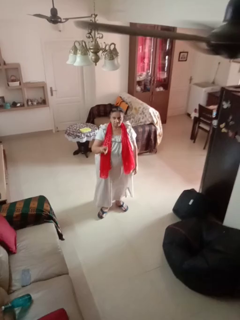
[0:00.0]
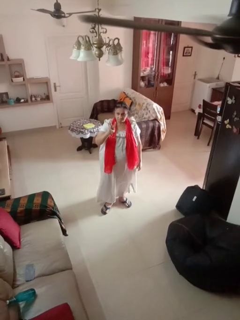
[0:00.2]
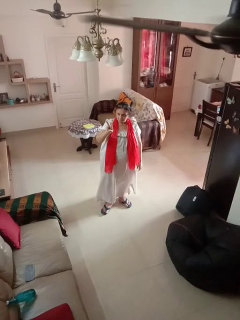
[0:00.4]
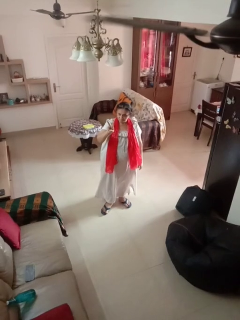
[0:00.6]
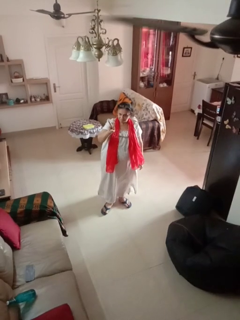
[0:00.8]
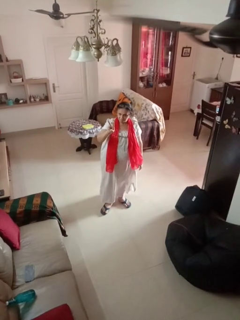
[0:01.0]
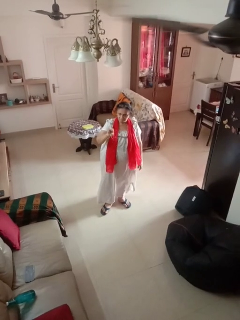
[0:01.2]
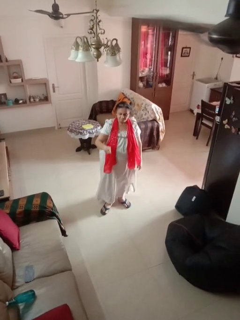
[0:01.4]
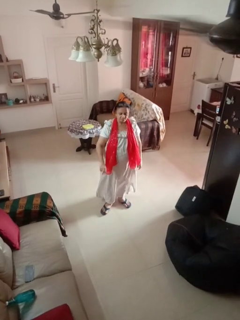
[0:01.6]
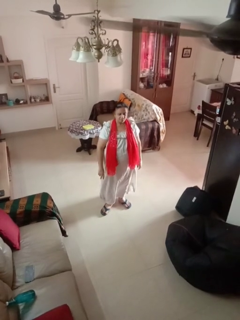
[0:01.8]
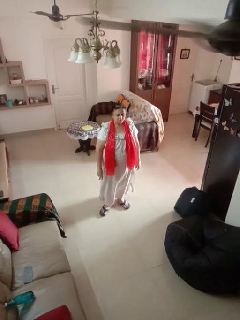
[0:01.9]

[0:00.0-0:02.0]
person gestures peace

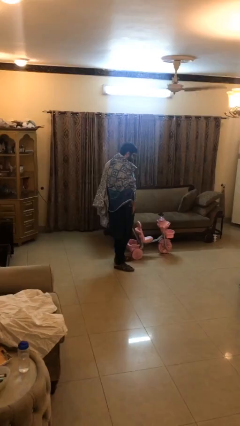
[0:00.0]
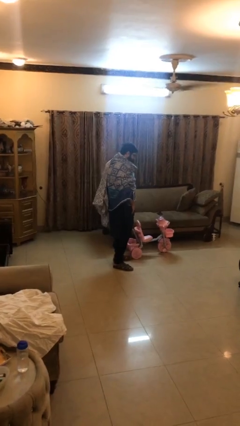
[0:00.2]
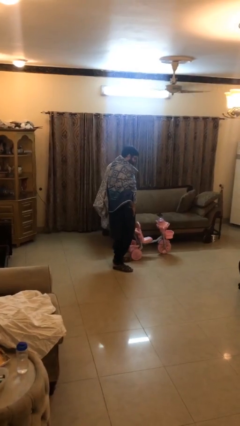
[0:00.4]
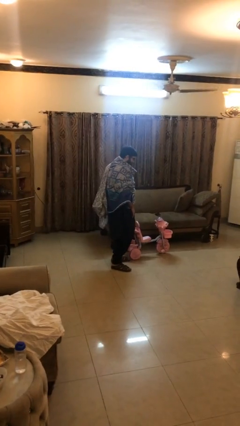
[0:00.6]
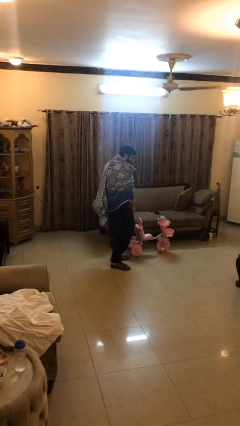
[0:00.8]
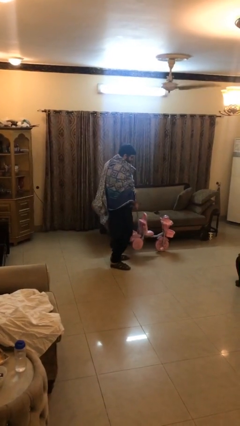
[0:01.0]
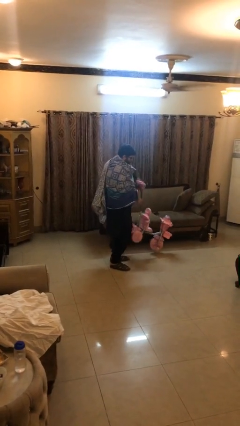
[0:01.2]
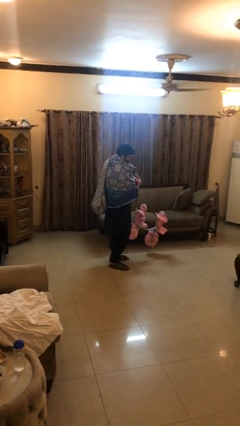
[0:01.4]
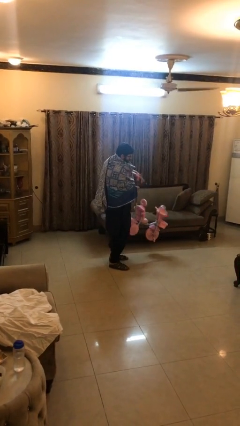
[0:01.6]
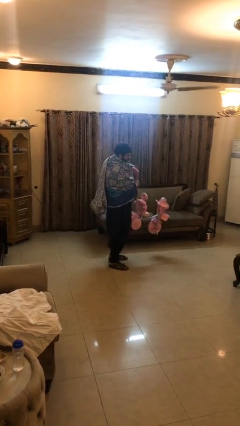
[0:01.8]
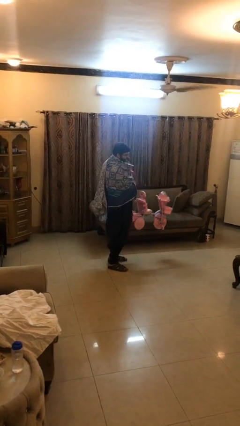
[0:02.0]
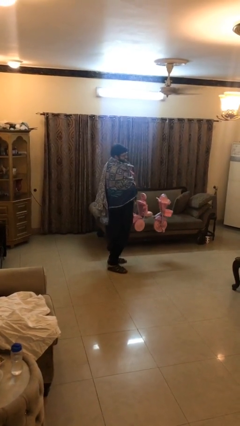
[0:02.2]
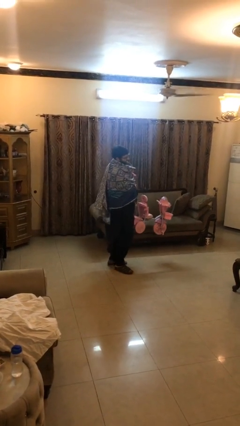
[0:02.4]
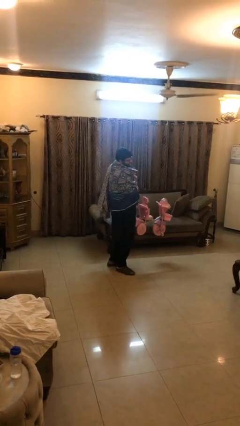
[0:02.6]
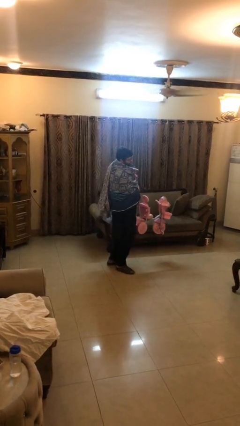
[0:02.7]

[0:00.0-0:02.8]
person picks up object from floor

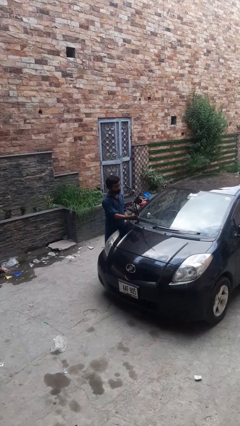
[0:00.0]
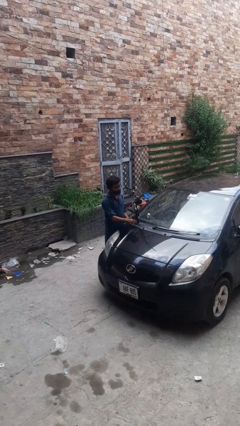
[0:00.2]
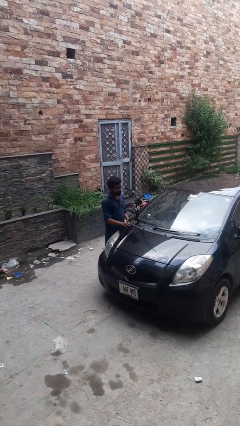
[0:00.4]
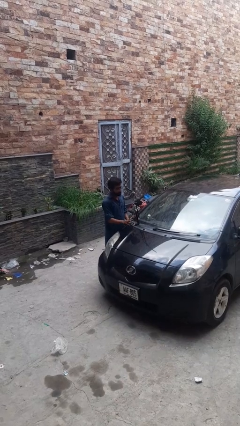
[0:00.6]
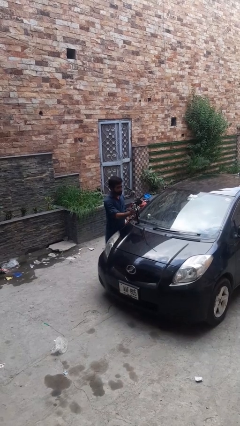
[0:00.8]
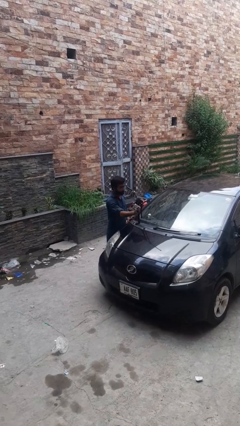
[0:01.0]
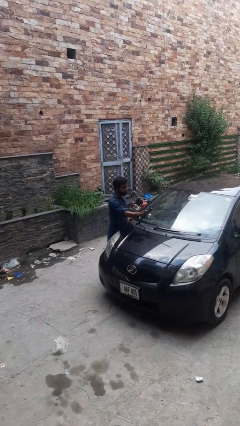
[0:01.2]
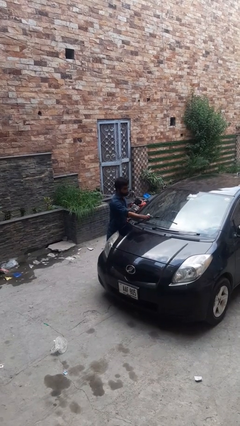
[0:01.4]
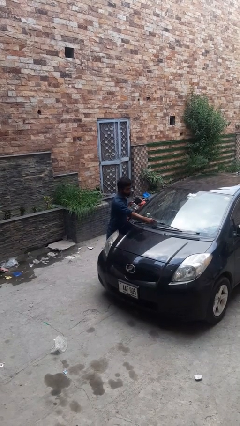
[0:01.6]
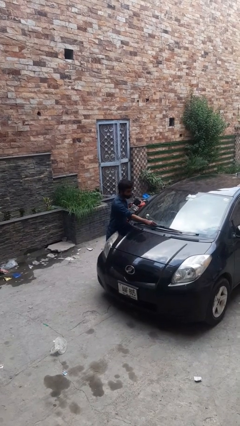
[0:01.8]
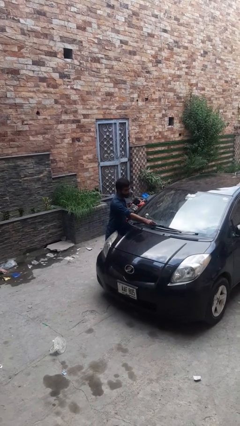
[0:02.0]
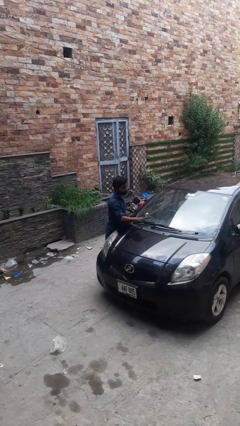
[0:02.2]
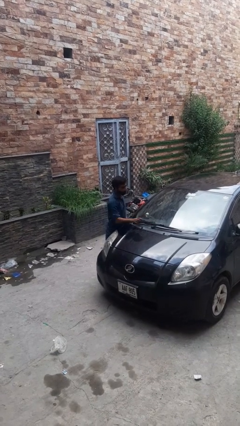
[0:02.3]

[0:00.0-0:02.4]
person flips down car wipers

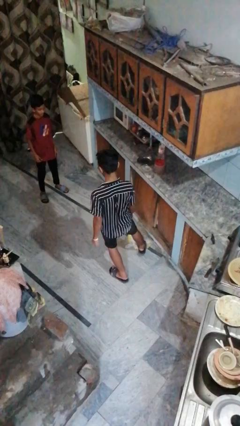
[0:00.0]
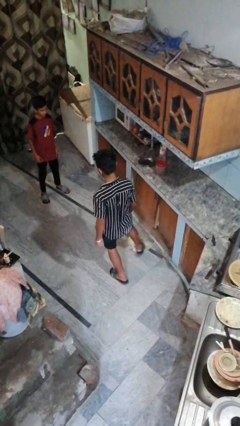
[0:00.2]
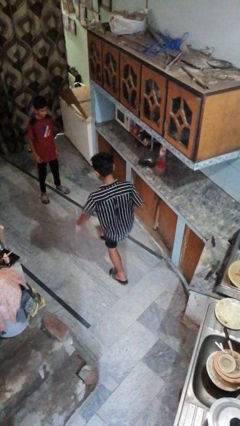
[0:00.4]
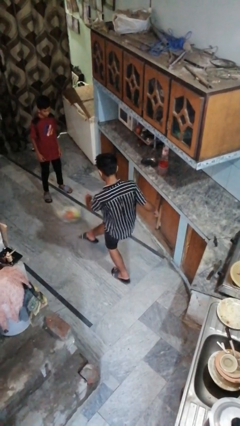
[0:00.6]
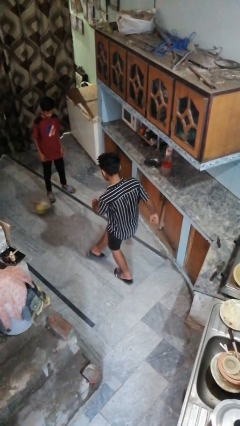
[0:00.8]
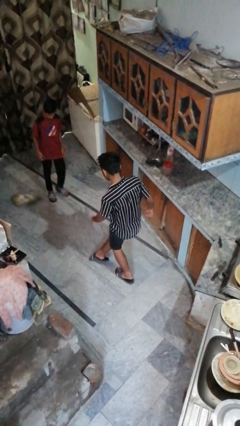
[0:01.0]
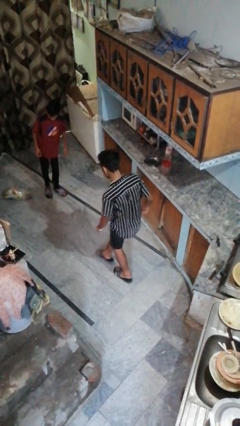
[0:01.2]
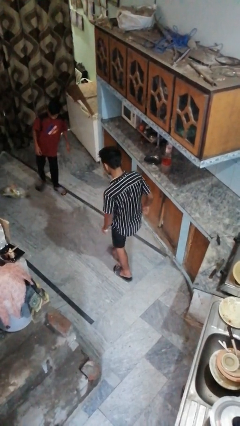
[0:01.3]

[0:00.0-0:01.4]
person kicks object to person

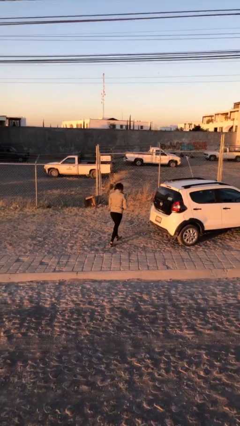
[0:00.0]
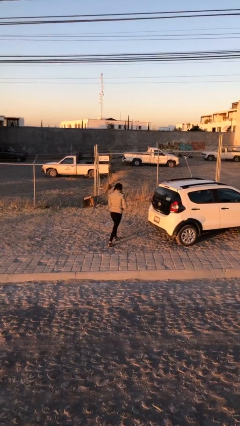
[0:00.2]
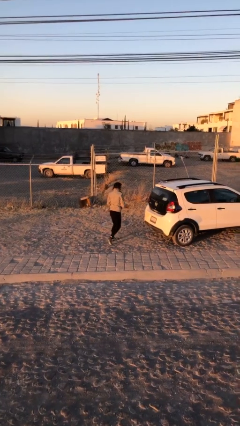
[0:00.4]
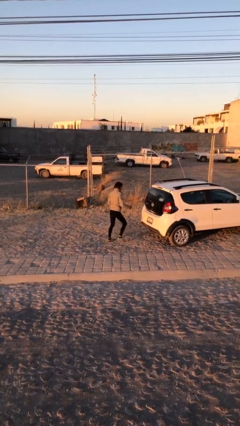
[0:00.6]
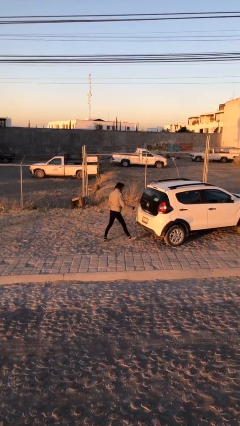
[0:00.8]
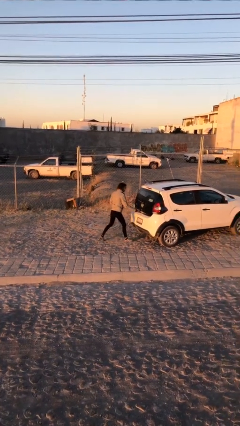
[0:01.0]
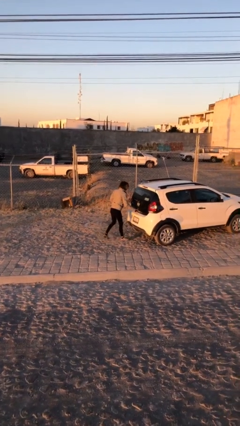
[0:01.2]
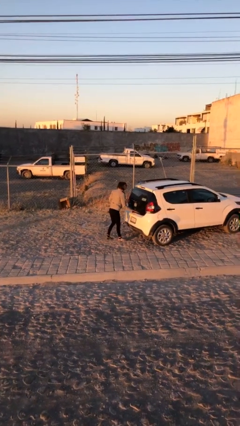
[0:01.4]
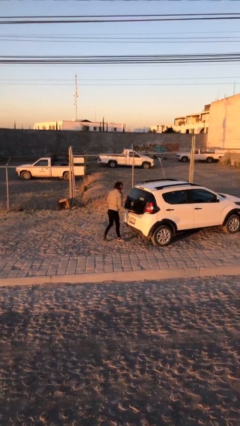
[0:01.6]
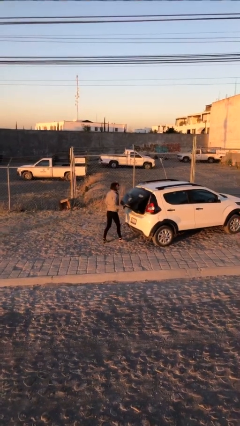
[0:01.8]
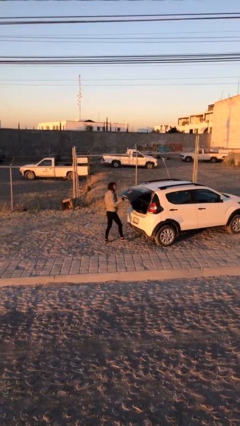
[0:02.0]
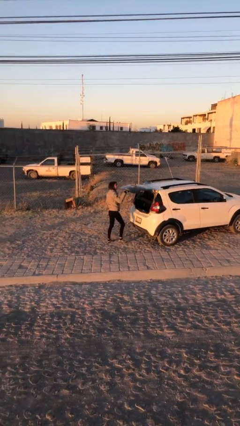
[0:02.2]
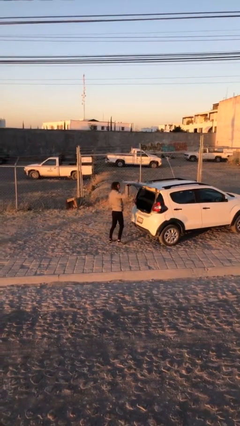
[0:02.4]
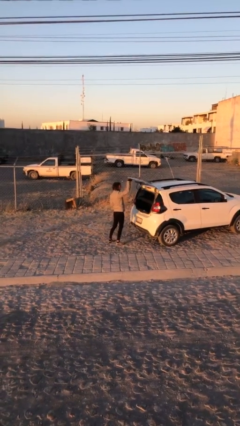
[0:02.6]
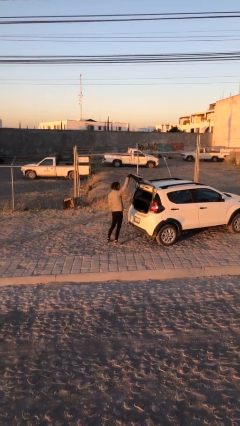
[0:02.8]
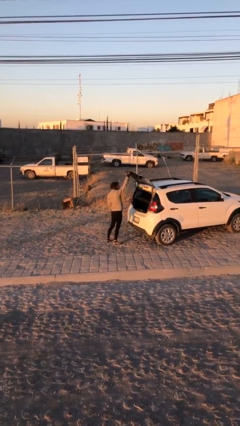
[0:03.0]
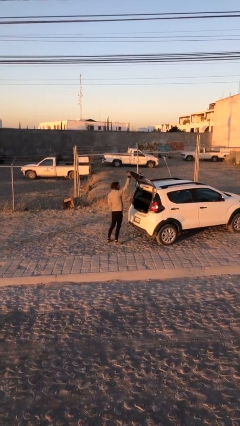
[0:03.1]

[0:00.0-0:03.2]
person opens car trunk

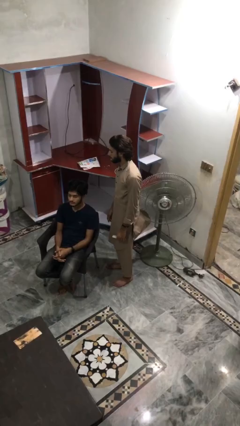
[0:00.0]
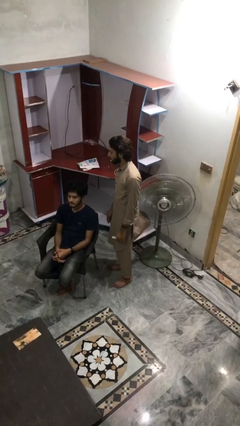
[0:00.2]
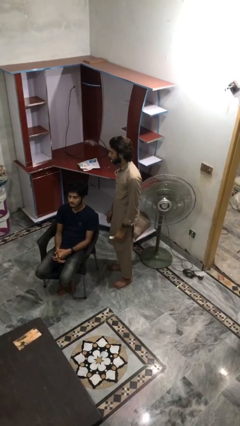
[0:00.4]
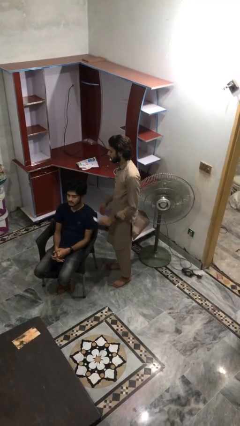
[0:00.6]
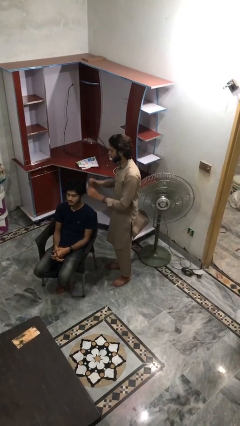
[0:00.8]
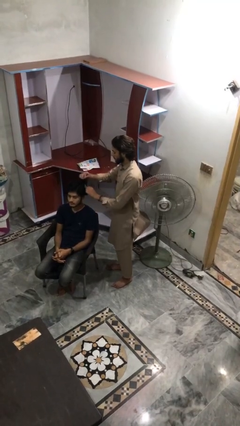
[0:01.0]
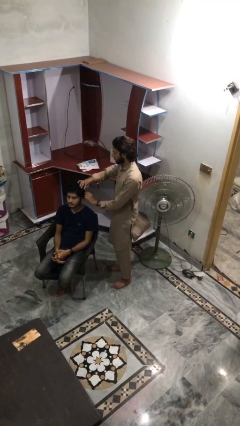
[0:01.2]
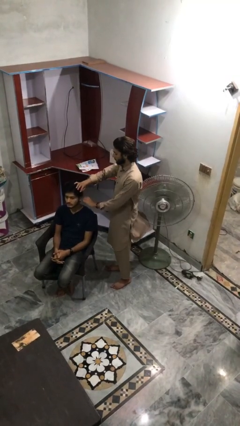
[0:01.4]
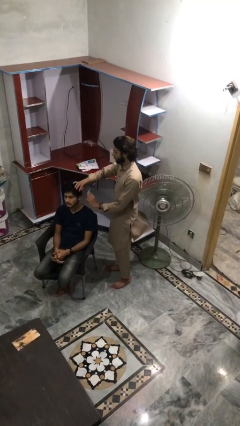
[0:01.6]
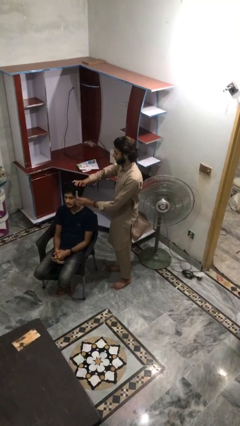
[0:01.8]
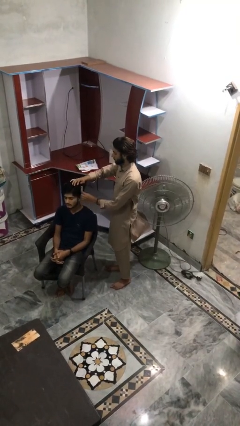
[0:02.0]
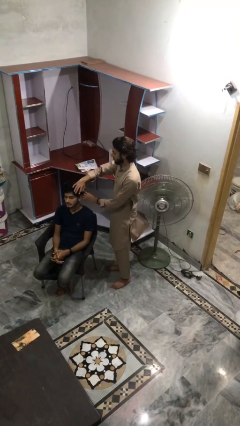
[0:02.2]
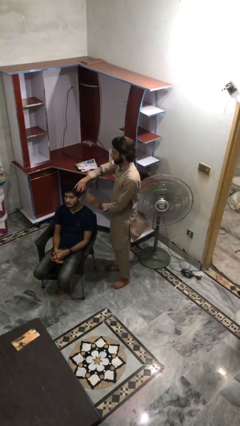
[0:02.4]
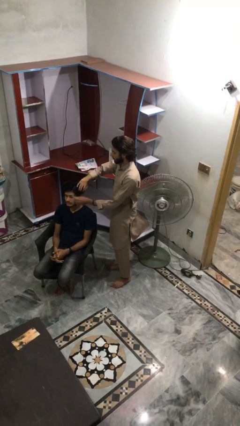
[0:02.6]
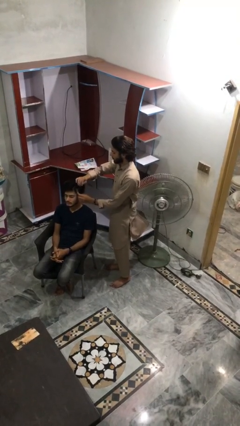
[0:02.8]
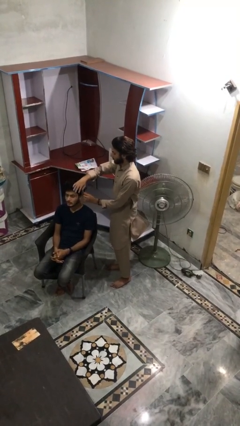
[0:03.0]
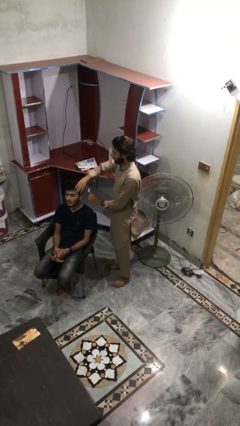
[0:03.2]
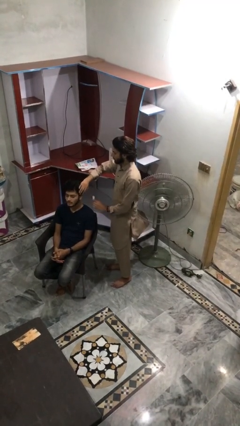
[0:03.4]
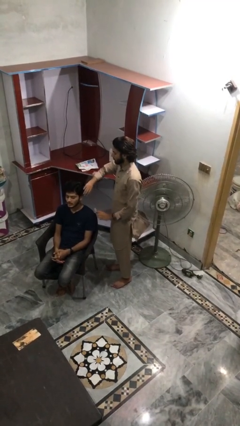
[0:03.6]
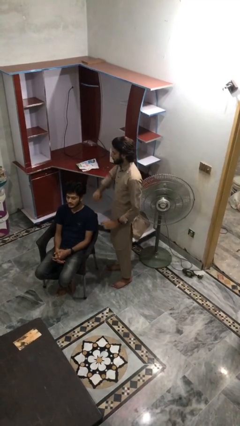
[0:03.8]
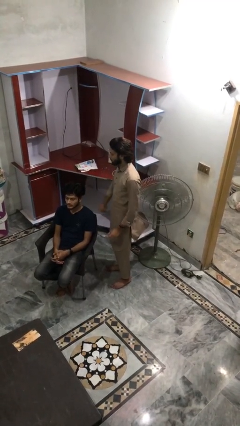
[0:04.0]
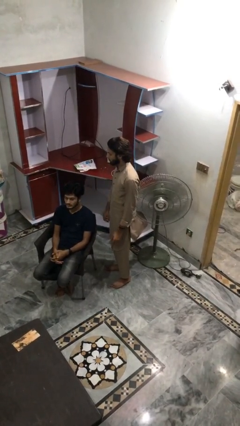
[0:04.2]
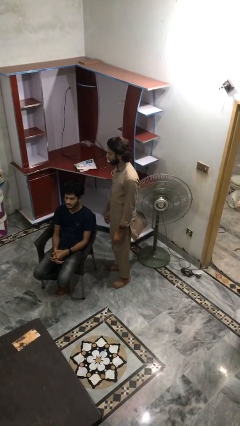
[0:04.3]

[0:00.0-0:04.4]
person brushes hair of person

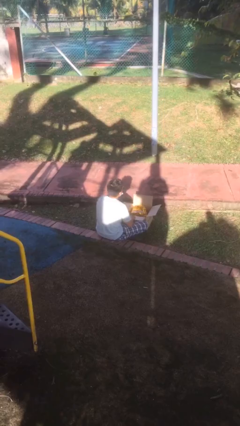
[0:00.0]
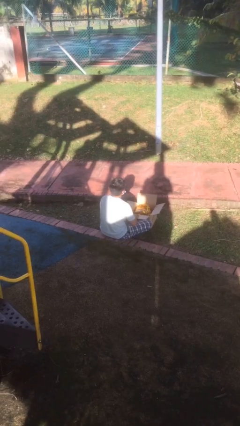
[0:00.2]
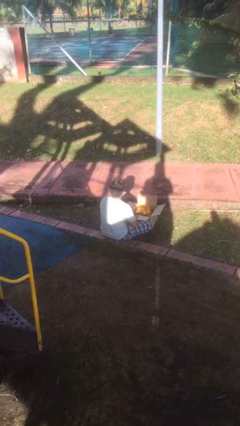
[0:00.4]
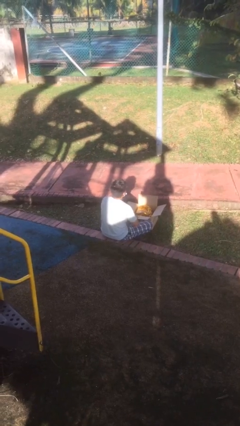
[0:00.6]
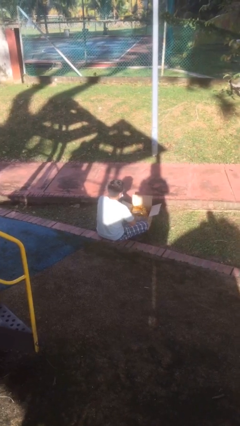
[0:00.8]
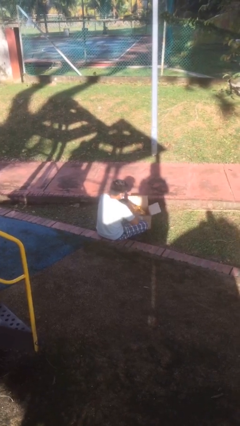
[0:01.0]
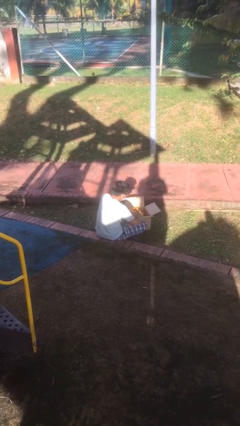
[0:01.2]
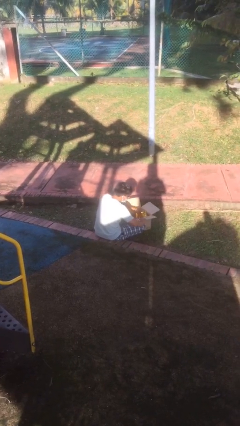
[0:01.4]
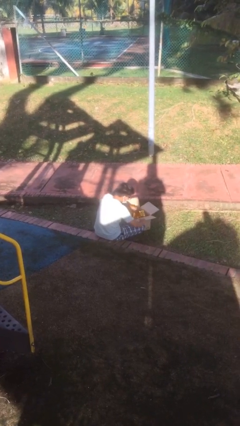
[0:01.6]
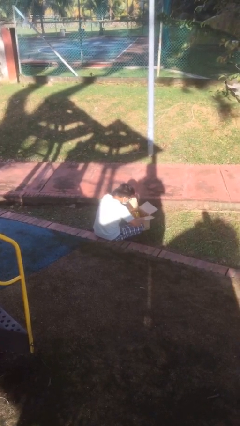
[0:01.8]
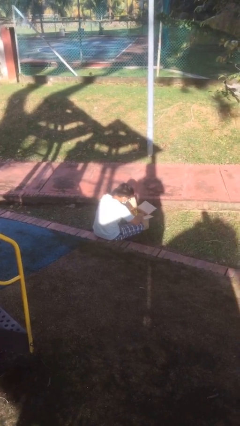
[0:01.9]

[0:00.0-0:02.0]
person searches in box
